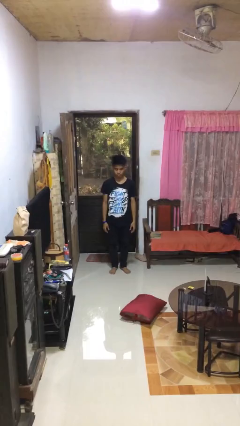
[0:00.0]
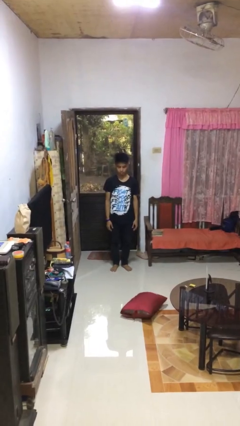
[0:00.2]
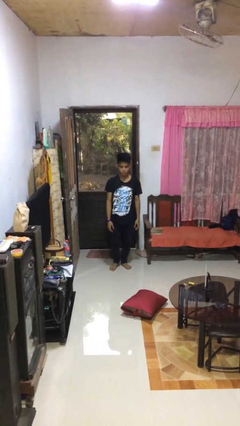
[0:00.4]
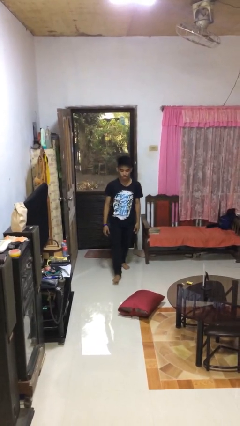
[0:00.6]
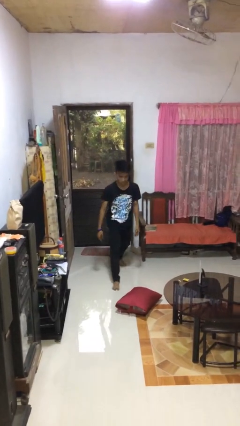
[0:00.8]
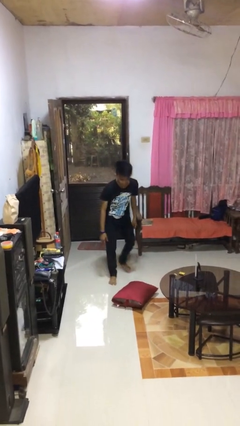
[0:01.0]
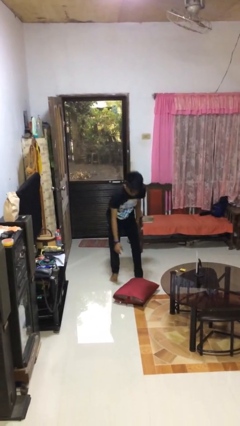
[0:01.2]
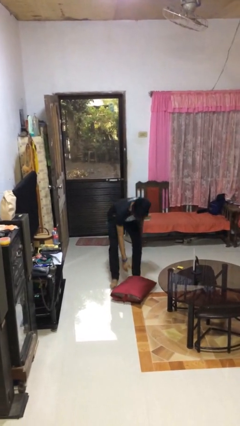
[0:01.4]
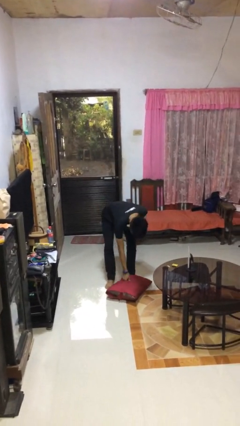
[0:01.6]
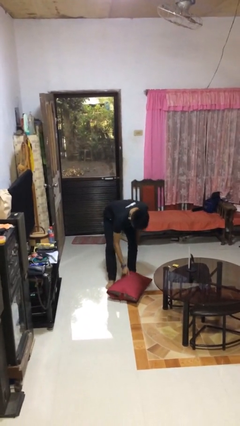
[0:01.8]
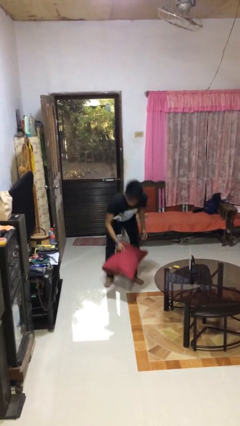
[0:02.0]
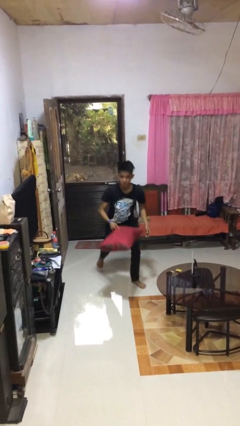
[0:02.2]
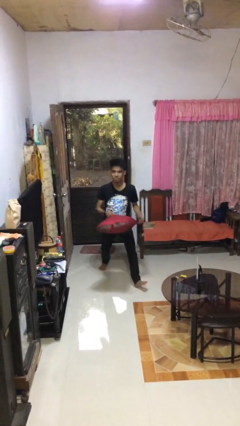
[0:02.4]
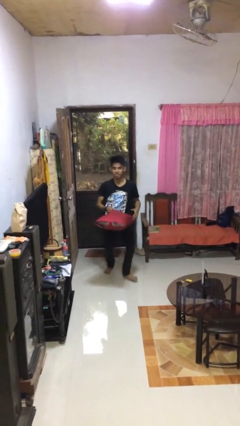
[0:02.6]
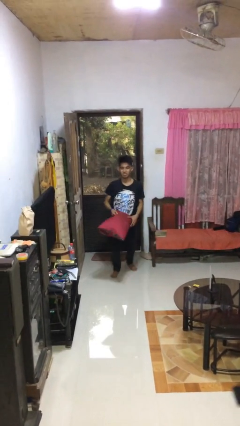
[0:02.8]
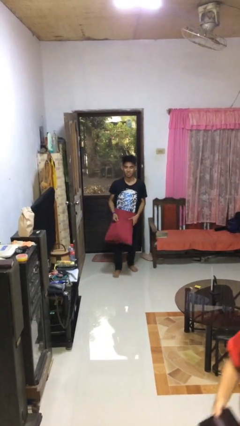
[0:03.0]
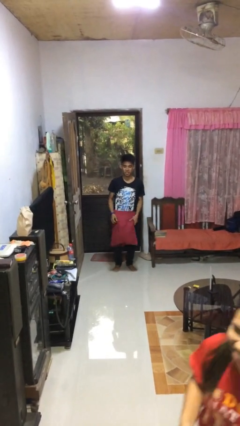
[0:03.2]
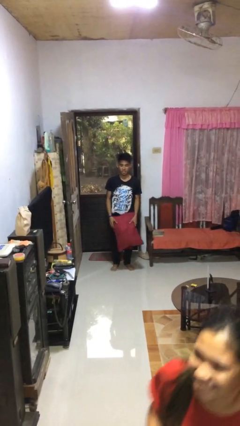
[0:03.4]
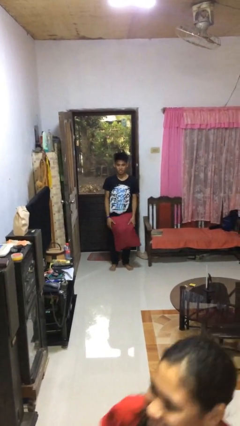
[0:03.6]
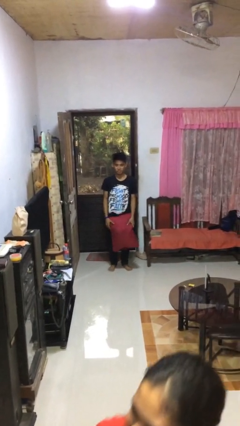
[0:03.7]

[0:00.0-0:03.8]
person picks up object from floor

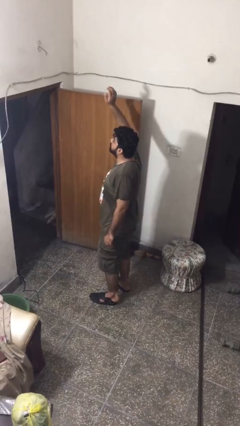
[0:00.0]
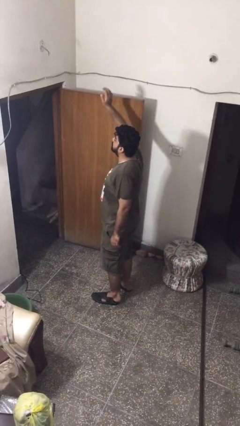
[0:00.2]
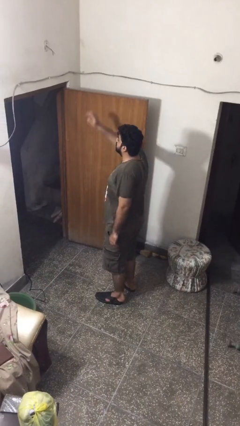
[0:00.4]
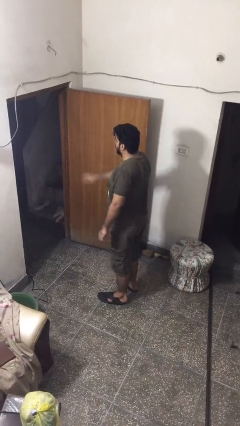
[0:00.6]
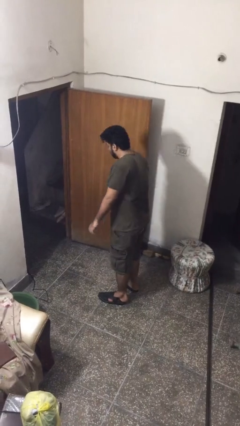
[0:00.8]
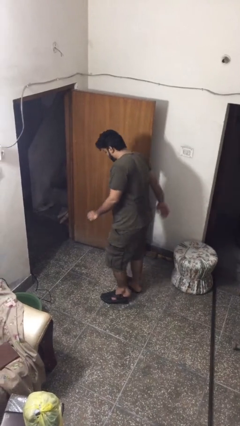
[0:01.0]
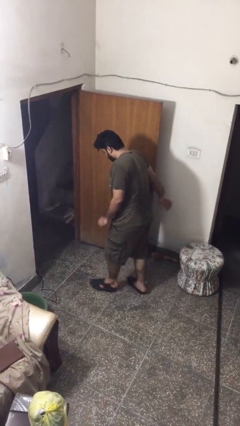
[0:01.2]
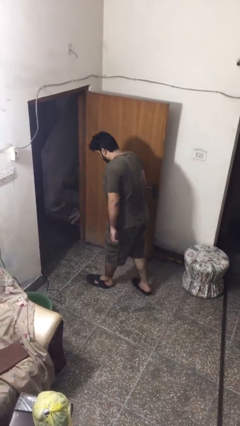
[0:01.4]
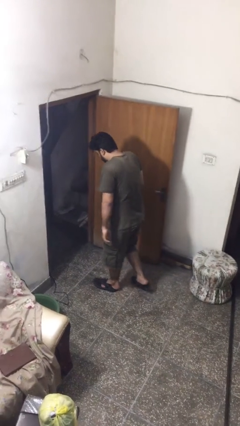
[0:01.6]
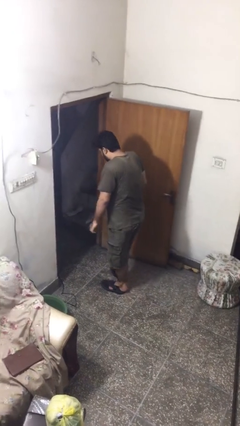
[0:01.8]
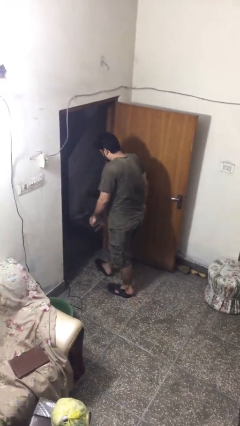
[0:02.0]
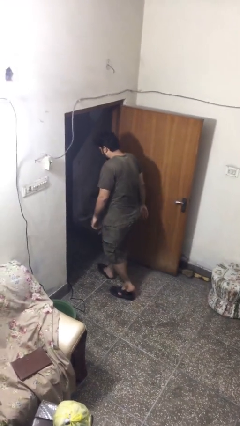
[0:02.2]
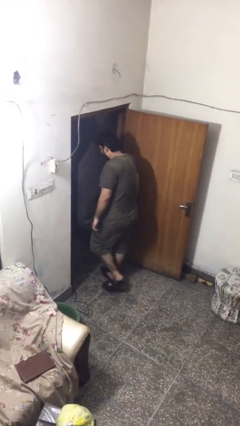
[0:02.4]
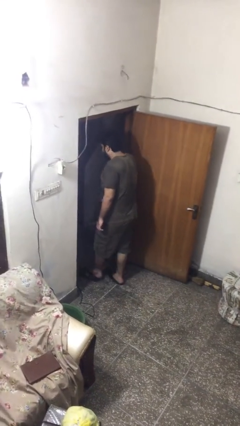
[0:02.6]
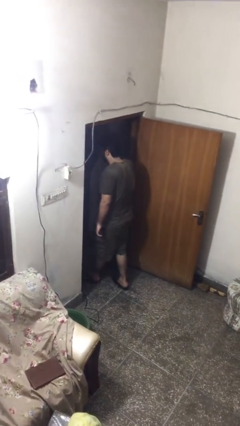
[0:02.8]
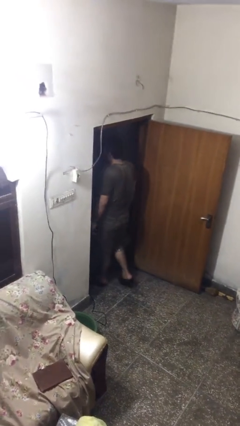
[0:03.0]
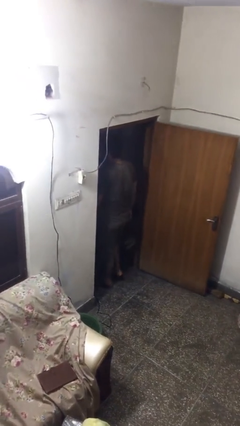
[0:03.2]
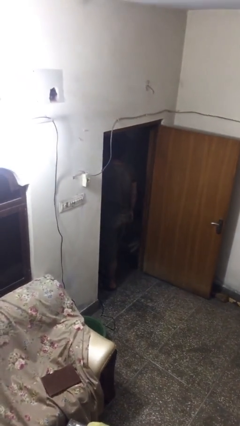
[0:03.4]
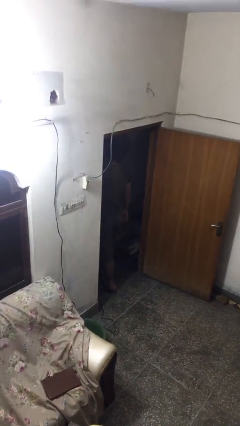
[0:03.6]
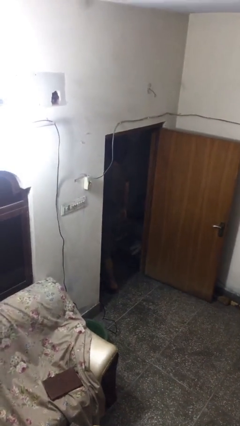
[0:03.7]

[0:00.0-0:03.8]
person exits scene through structure

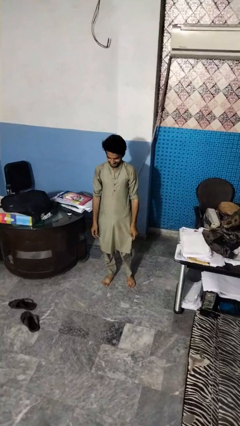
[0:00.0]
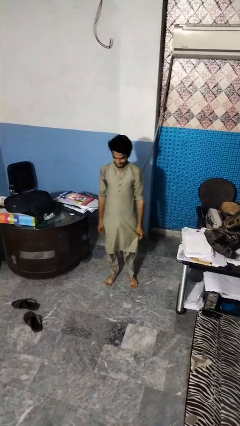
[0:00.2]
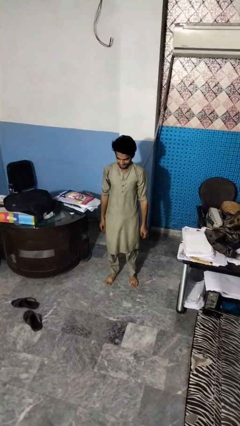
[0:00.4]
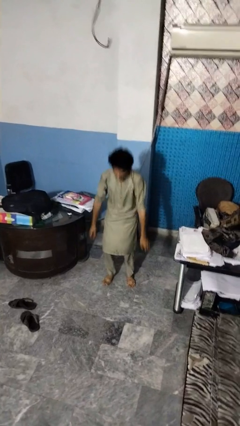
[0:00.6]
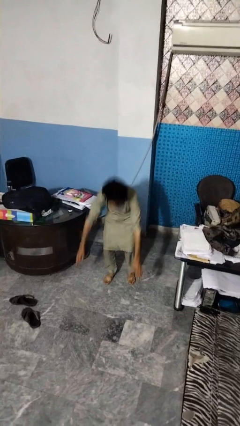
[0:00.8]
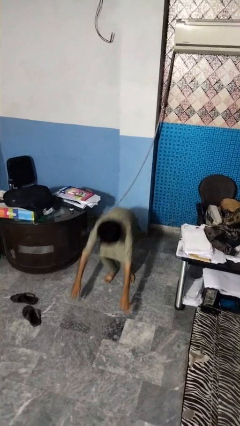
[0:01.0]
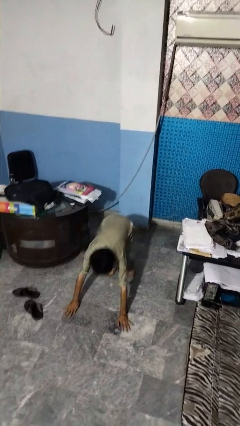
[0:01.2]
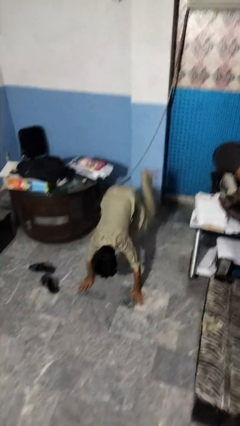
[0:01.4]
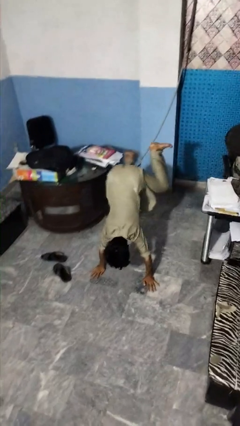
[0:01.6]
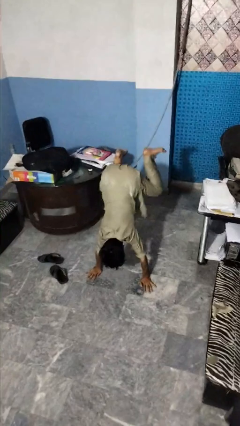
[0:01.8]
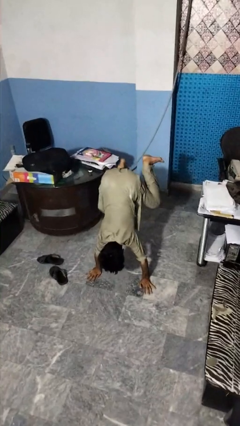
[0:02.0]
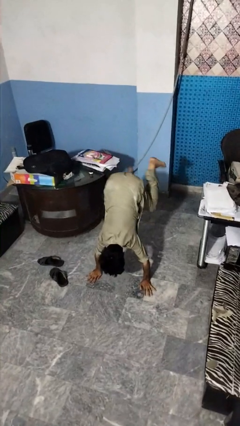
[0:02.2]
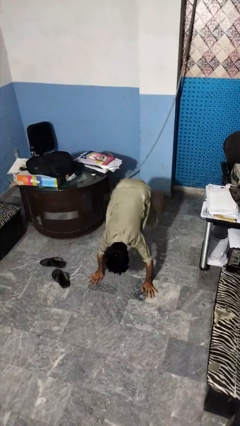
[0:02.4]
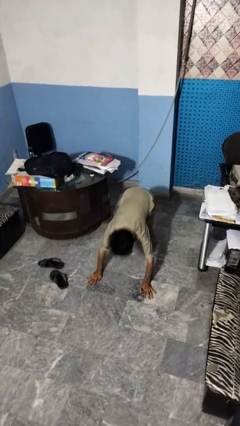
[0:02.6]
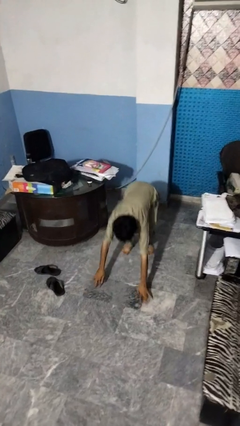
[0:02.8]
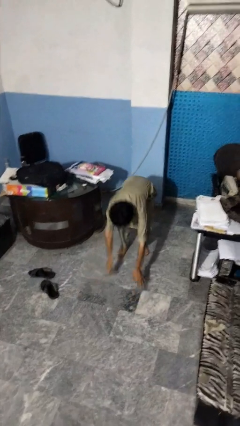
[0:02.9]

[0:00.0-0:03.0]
person handstand

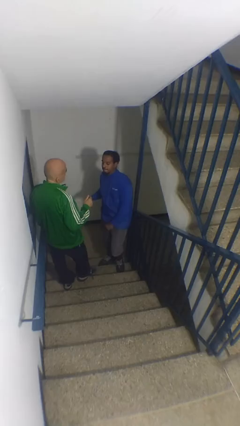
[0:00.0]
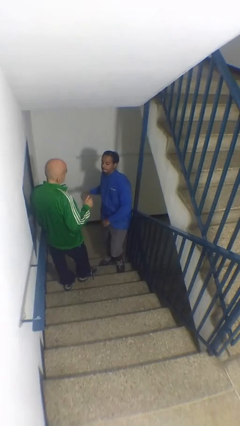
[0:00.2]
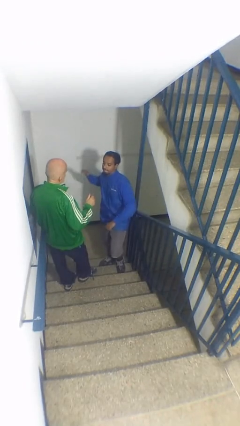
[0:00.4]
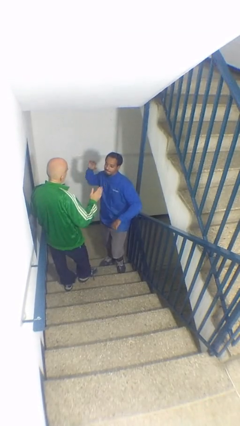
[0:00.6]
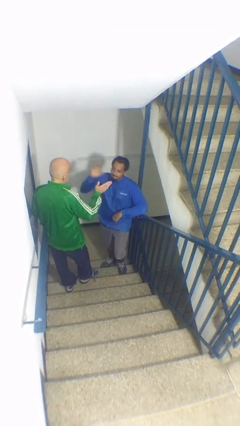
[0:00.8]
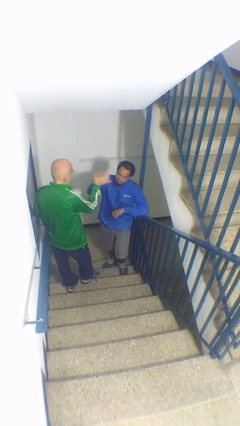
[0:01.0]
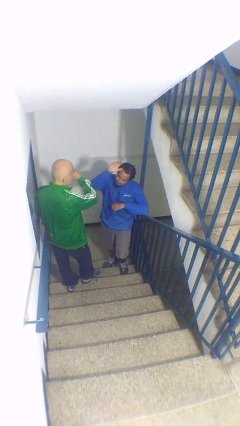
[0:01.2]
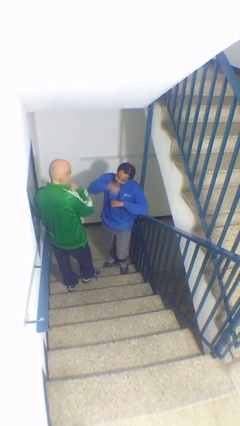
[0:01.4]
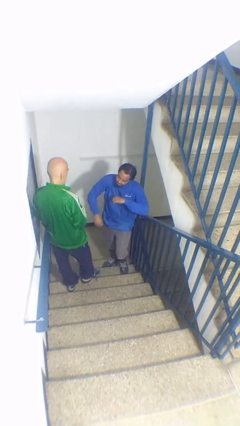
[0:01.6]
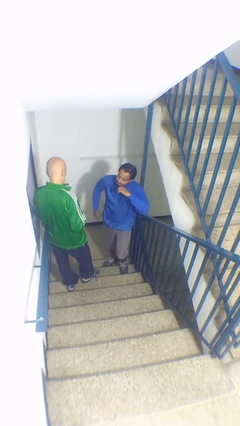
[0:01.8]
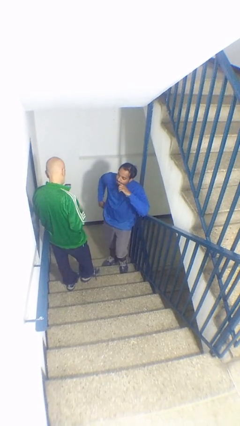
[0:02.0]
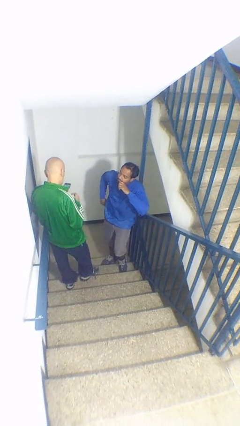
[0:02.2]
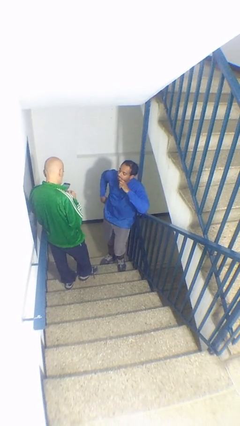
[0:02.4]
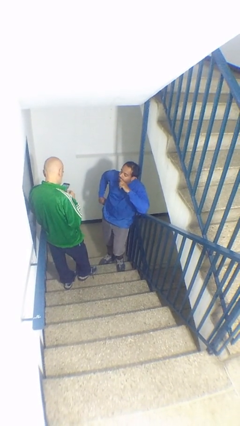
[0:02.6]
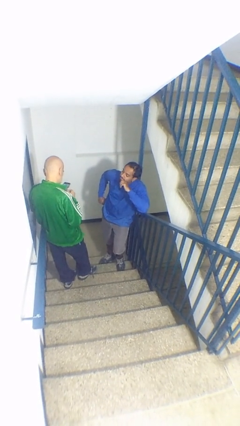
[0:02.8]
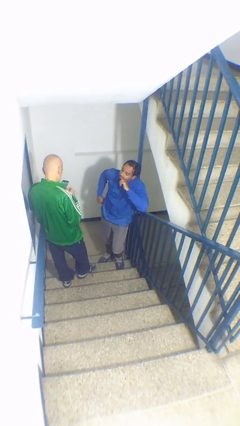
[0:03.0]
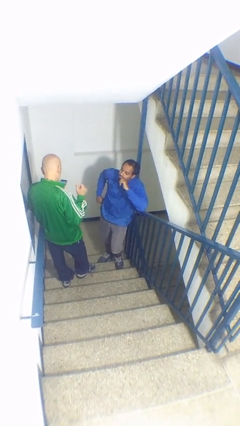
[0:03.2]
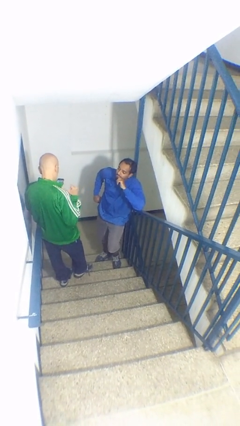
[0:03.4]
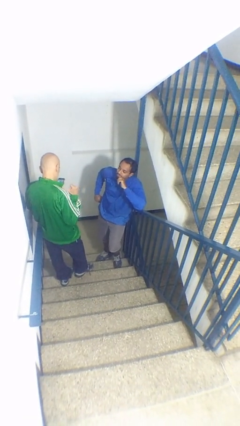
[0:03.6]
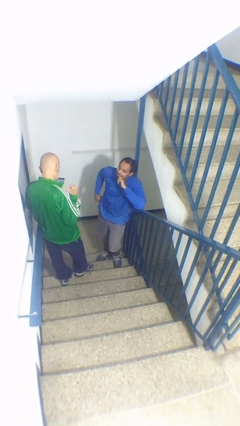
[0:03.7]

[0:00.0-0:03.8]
person highfives hand

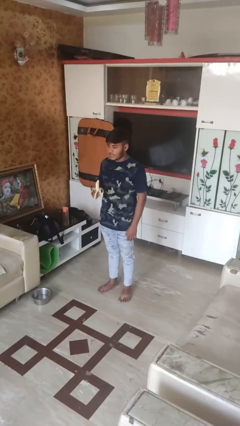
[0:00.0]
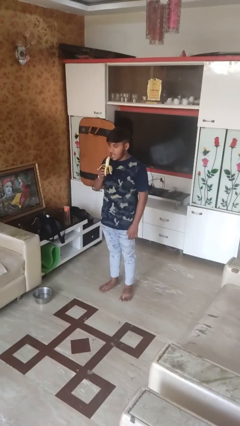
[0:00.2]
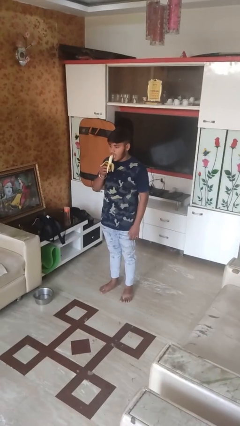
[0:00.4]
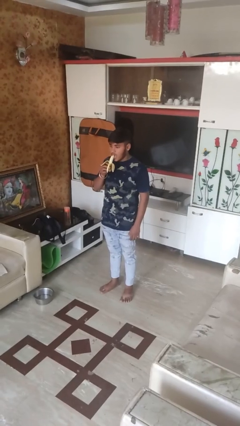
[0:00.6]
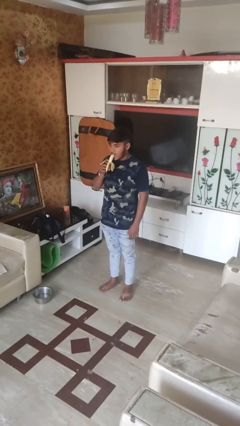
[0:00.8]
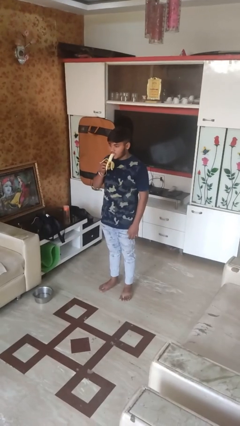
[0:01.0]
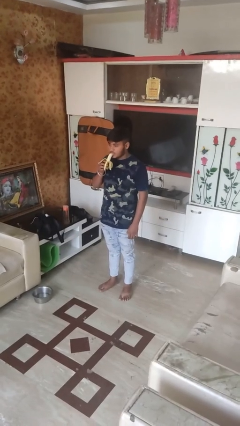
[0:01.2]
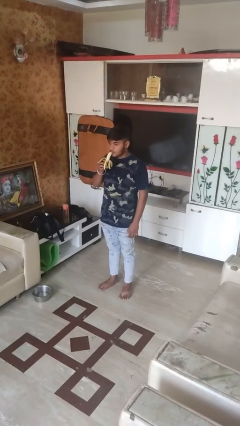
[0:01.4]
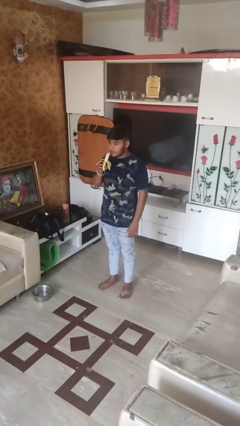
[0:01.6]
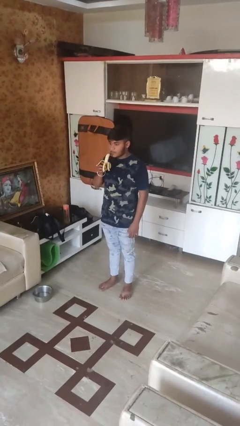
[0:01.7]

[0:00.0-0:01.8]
person eats banana

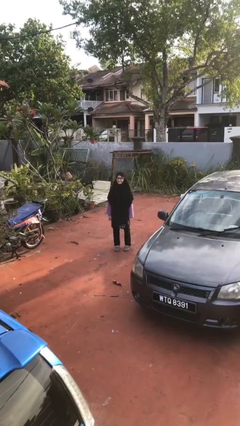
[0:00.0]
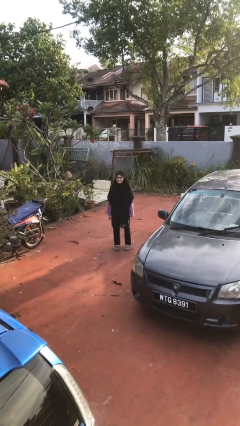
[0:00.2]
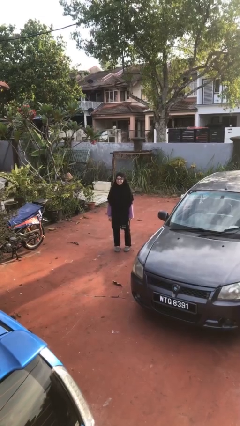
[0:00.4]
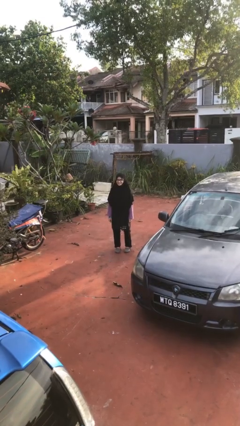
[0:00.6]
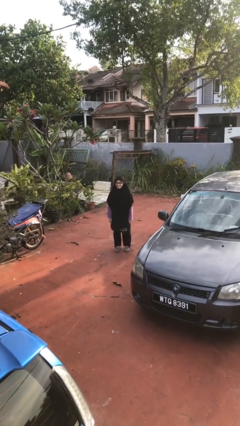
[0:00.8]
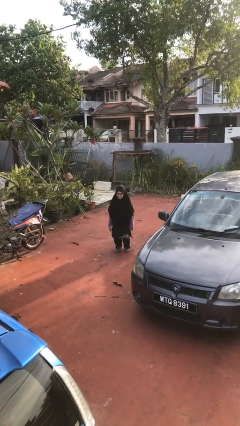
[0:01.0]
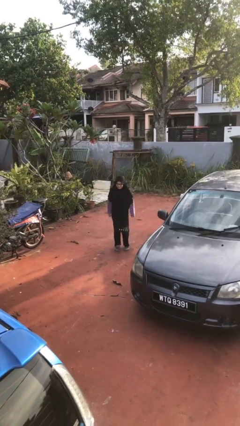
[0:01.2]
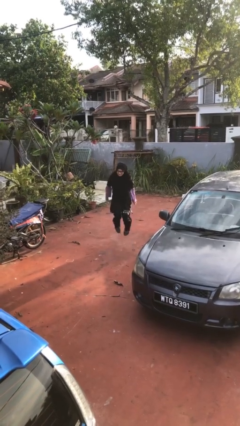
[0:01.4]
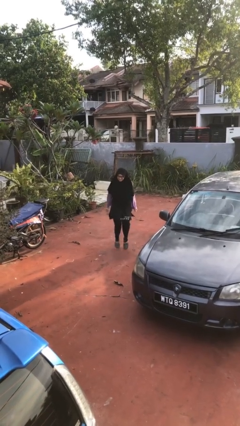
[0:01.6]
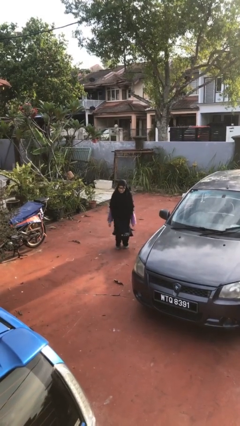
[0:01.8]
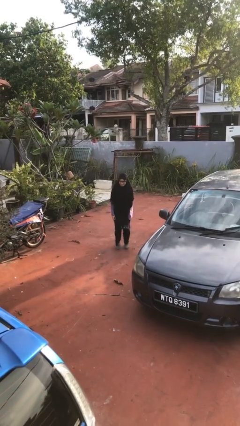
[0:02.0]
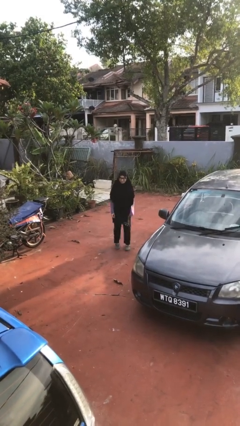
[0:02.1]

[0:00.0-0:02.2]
person jumps
